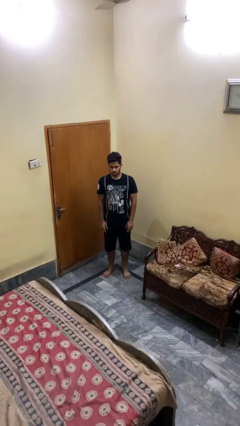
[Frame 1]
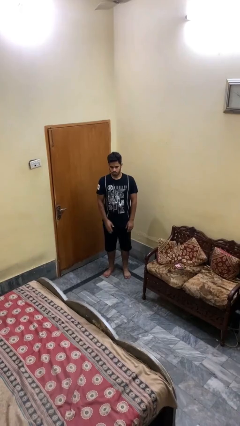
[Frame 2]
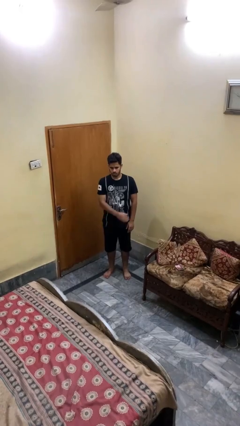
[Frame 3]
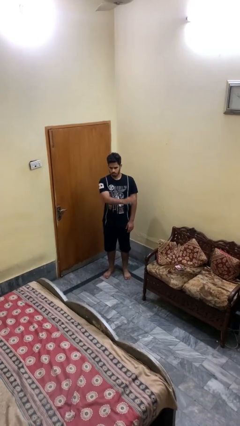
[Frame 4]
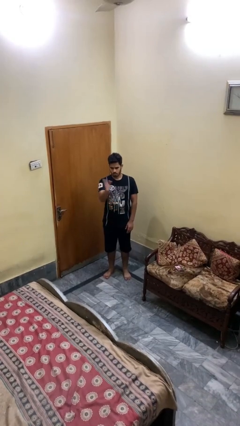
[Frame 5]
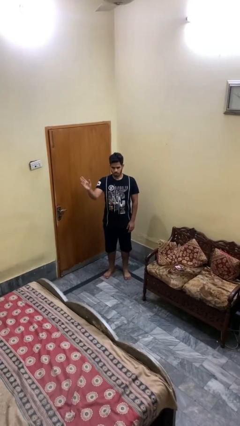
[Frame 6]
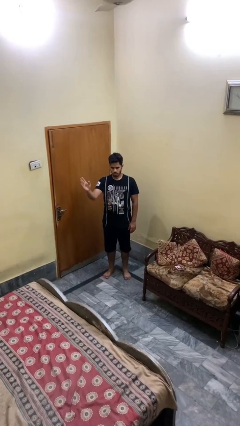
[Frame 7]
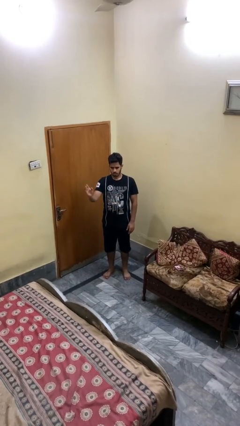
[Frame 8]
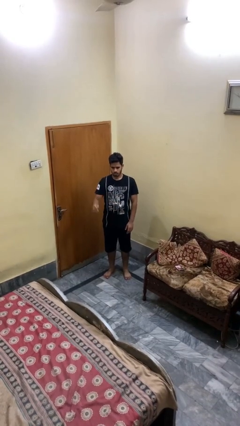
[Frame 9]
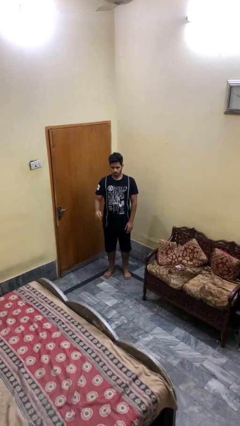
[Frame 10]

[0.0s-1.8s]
person gestures swipe right

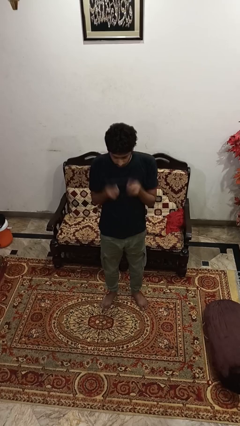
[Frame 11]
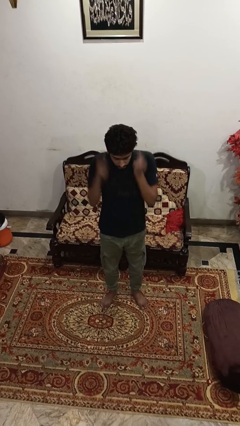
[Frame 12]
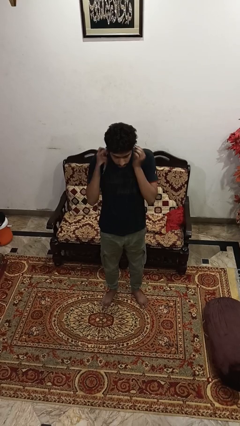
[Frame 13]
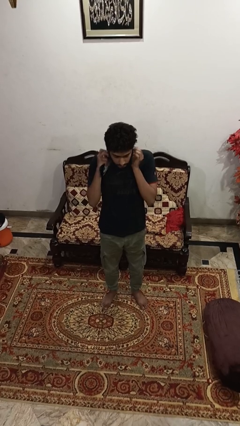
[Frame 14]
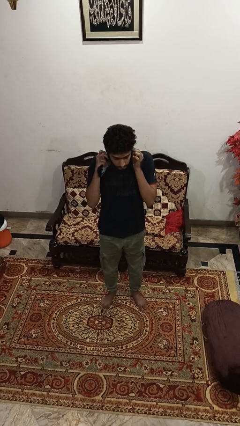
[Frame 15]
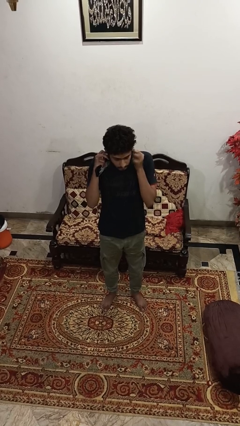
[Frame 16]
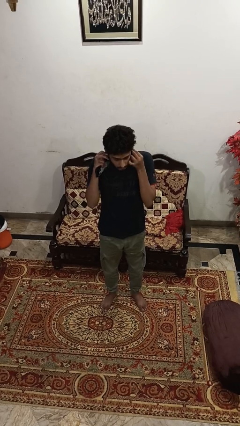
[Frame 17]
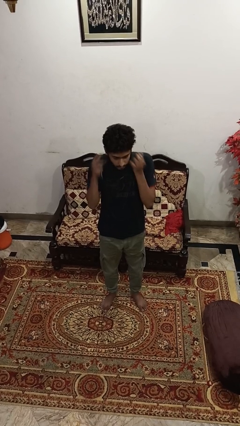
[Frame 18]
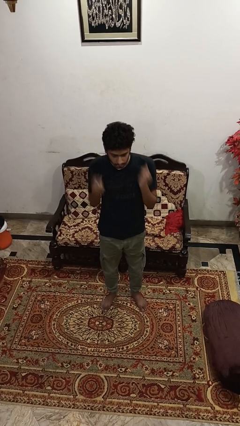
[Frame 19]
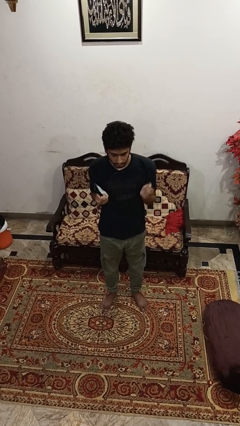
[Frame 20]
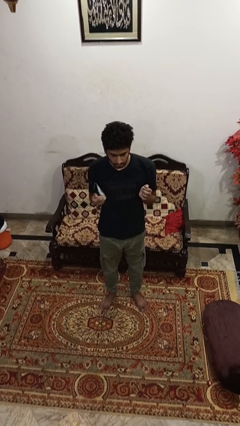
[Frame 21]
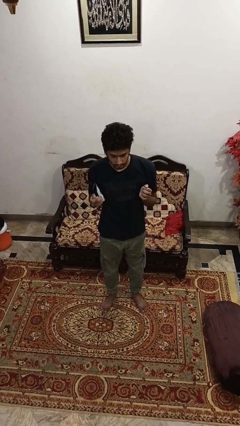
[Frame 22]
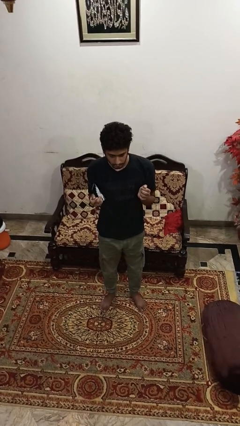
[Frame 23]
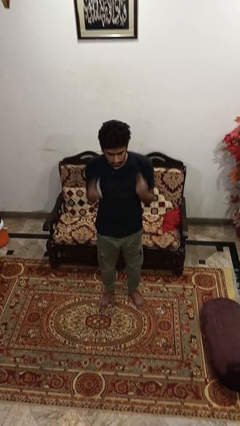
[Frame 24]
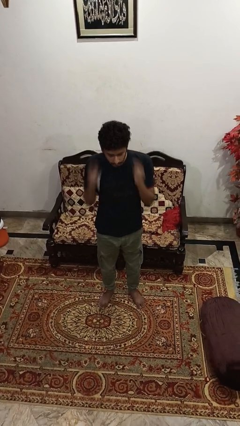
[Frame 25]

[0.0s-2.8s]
person puts on headphones

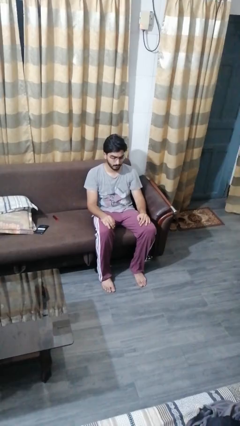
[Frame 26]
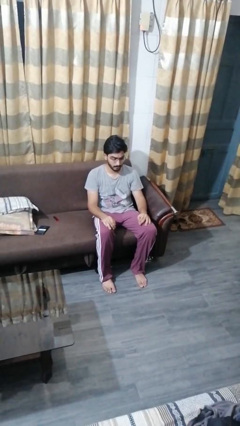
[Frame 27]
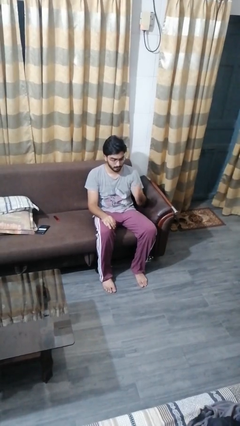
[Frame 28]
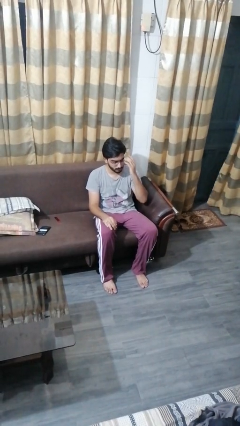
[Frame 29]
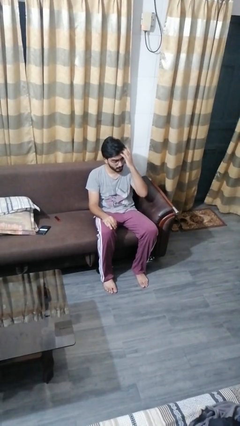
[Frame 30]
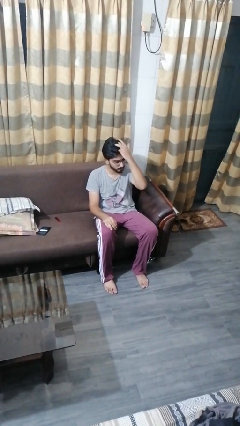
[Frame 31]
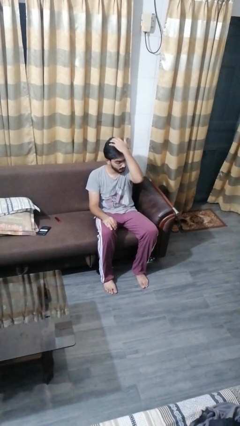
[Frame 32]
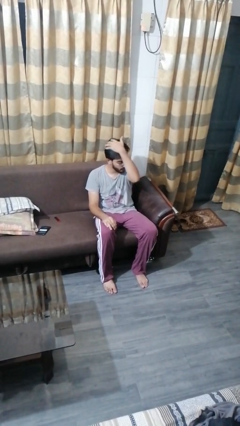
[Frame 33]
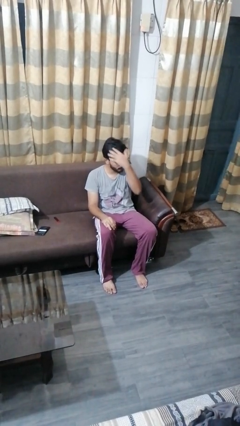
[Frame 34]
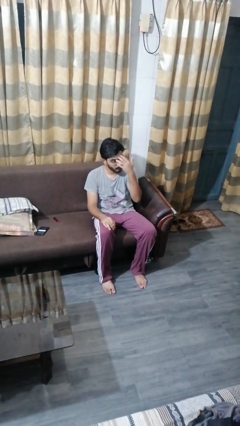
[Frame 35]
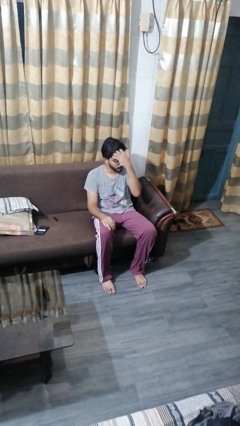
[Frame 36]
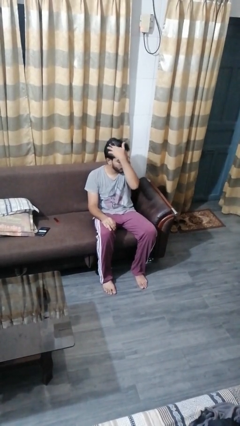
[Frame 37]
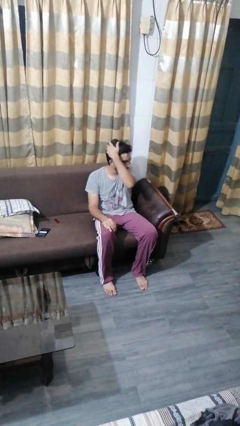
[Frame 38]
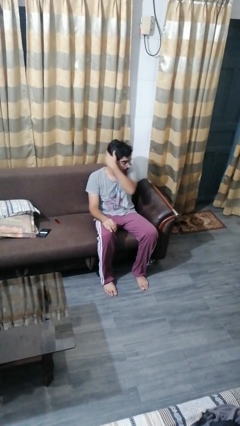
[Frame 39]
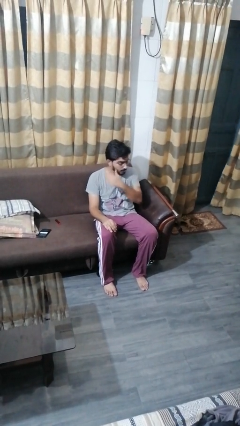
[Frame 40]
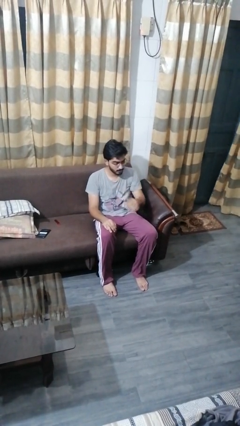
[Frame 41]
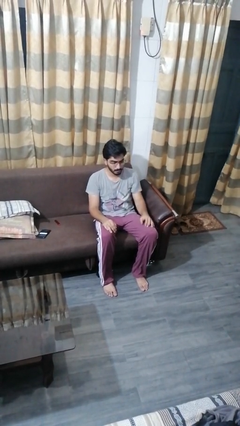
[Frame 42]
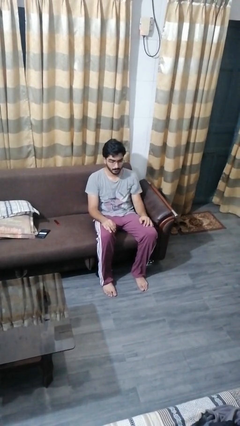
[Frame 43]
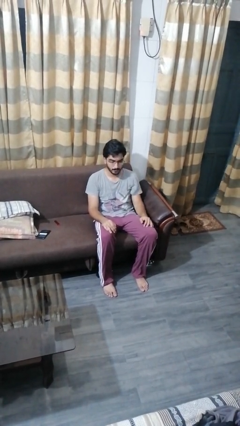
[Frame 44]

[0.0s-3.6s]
person strokes hair

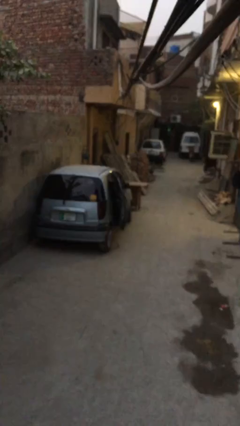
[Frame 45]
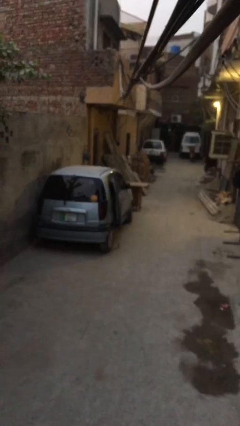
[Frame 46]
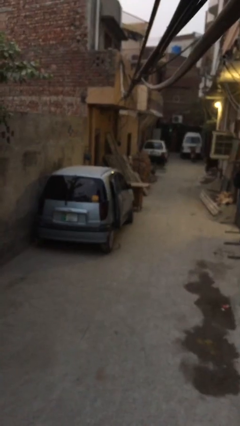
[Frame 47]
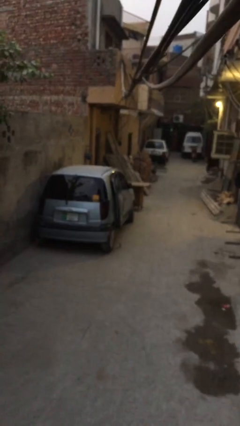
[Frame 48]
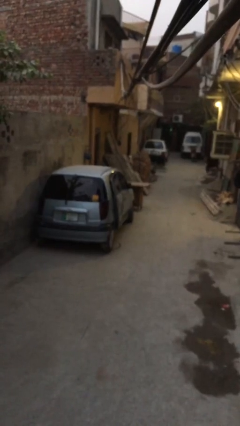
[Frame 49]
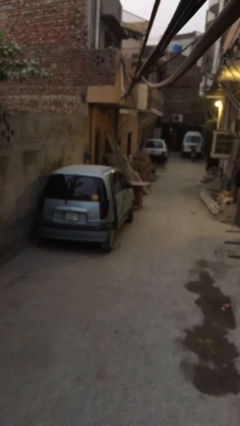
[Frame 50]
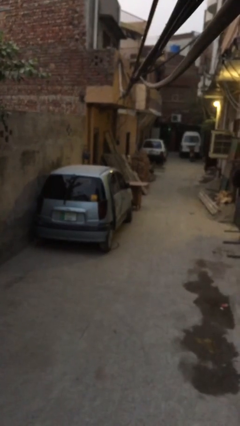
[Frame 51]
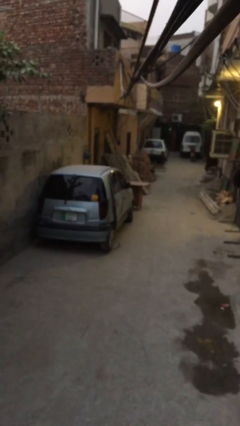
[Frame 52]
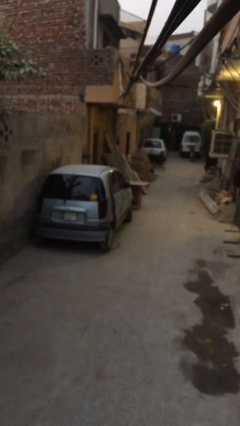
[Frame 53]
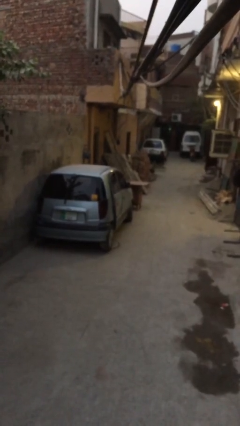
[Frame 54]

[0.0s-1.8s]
person closes car door

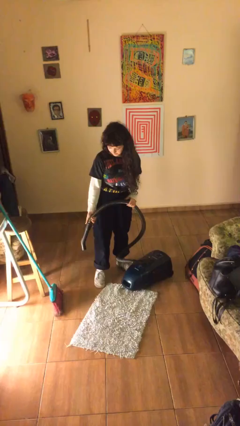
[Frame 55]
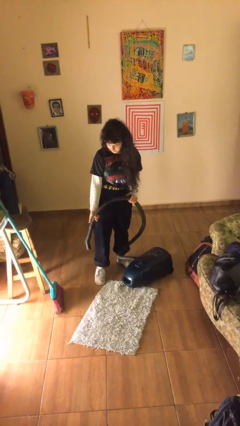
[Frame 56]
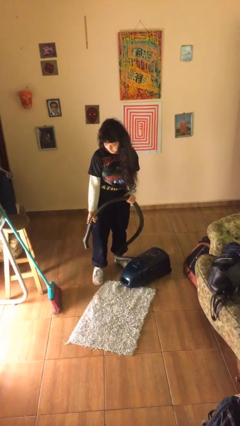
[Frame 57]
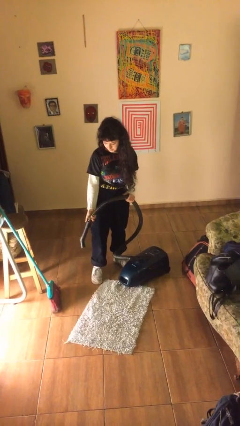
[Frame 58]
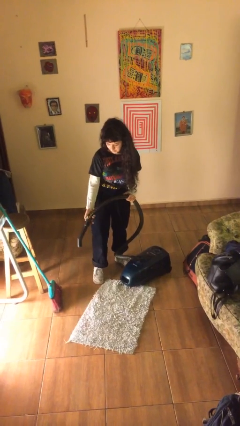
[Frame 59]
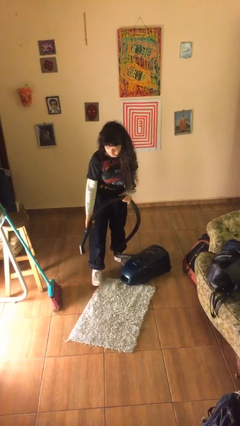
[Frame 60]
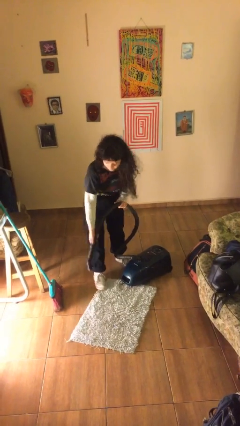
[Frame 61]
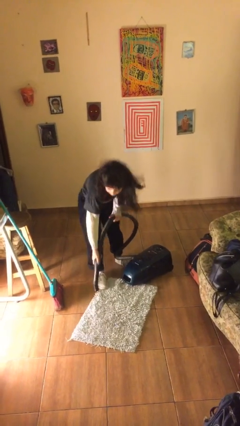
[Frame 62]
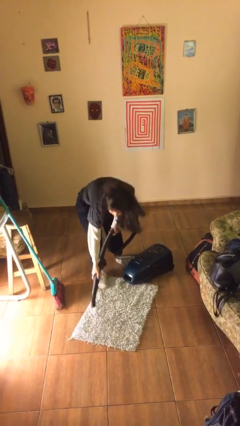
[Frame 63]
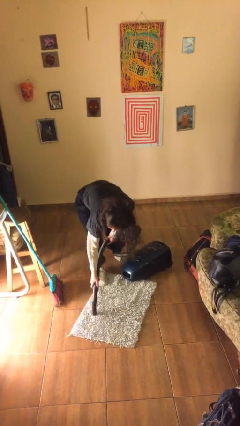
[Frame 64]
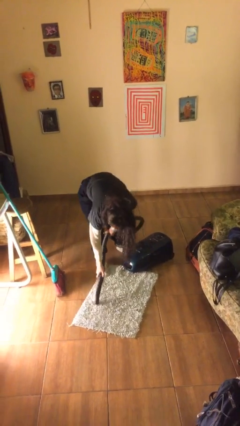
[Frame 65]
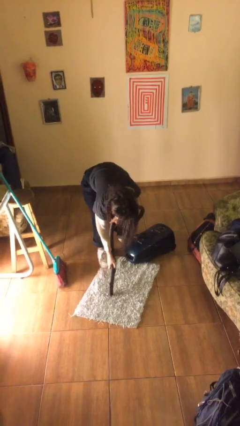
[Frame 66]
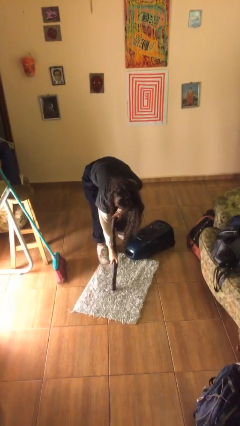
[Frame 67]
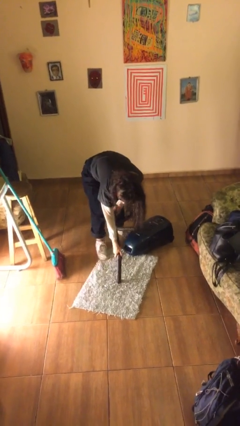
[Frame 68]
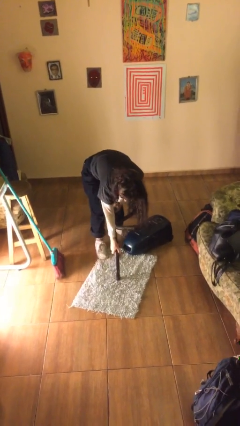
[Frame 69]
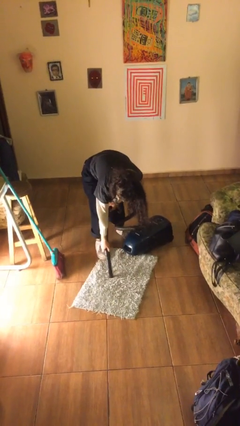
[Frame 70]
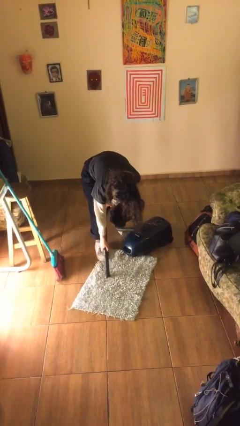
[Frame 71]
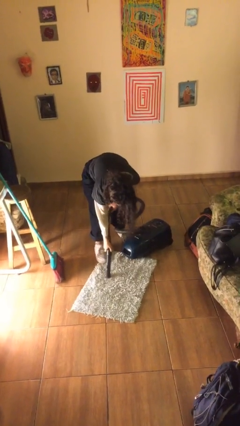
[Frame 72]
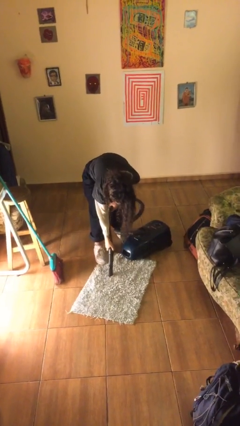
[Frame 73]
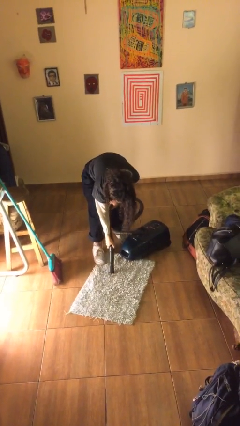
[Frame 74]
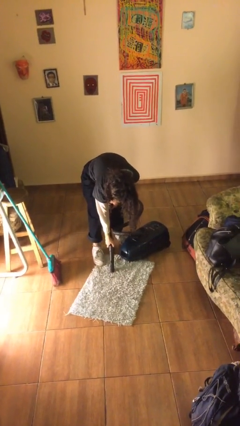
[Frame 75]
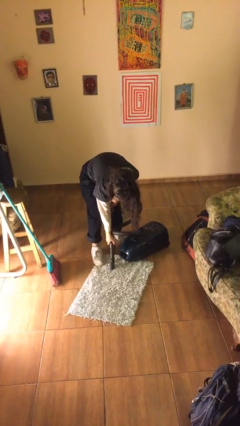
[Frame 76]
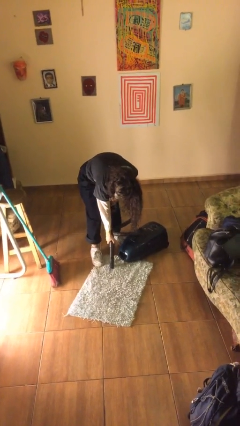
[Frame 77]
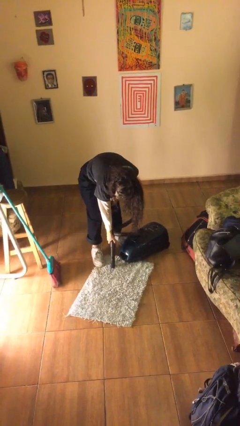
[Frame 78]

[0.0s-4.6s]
person vacuums carpet

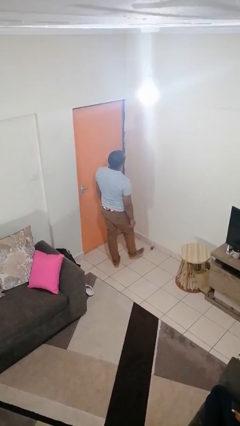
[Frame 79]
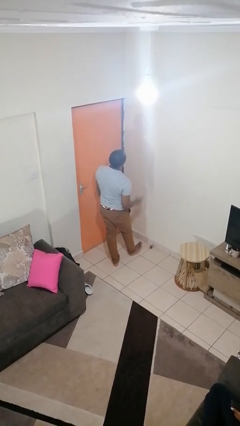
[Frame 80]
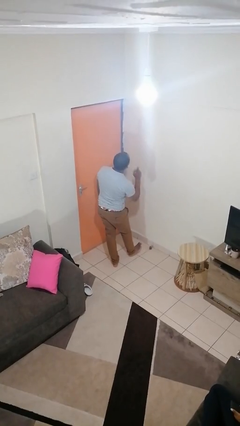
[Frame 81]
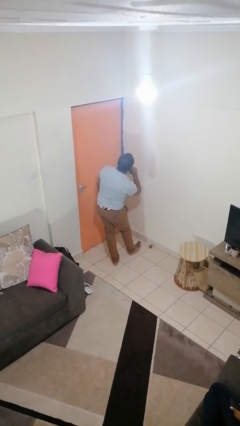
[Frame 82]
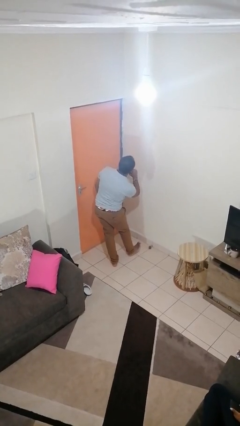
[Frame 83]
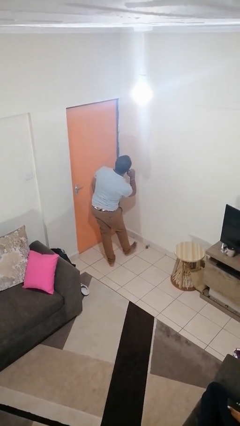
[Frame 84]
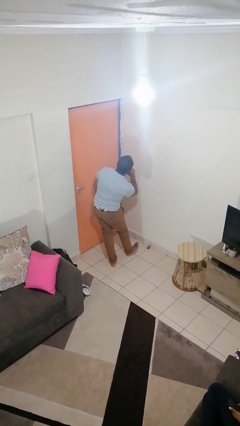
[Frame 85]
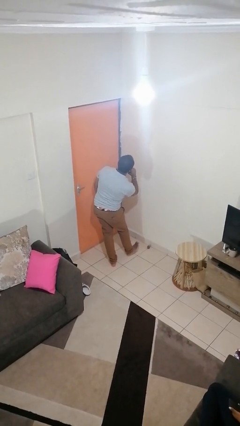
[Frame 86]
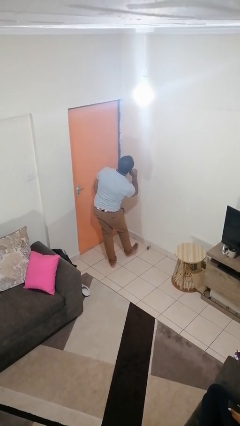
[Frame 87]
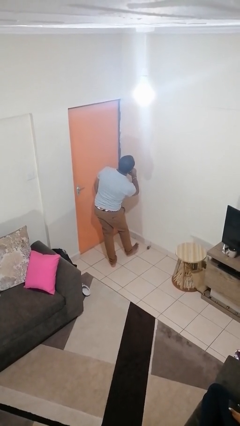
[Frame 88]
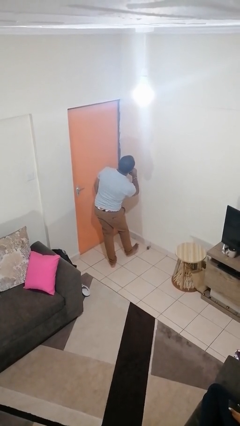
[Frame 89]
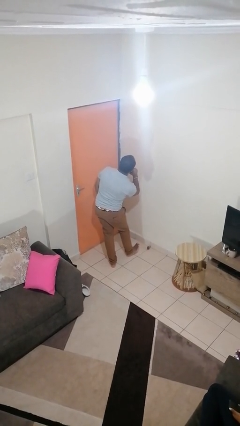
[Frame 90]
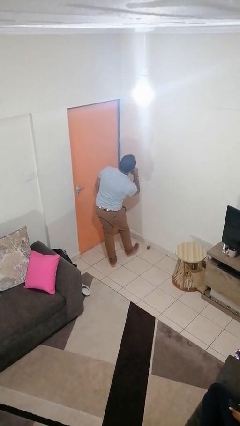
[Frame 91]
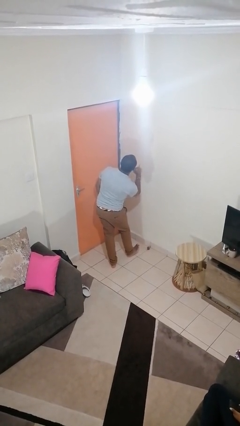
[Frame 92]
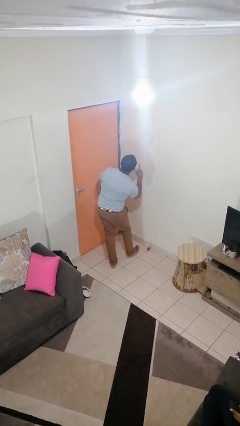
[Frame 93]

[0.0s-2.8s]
person gestures listen closely

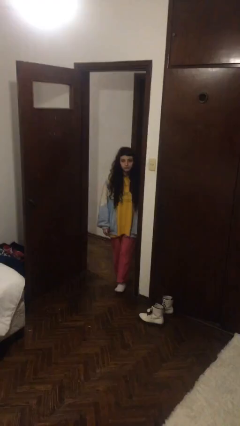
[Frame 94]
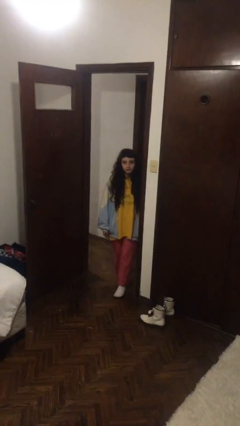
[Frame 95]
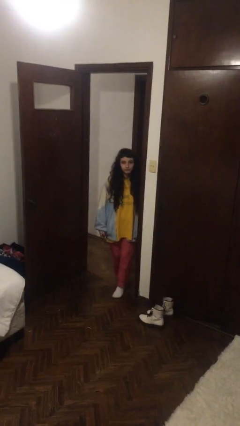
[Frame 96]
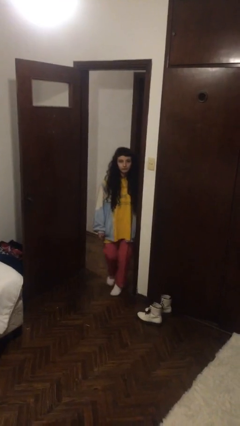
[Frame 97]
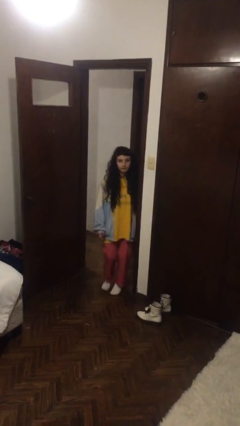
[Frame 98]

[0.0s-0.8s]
person bumps into wall
